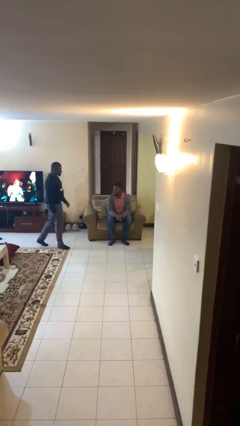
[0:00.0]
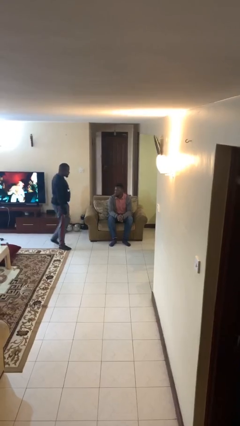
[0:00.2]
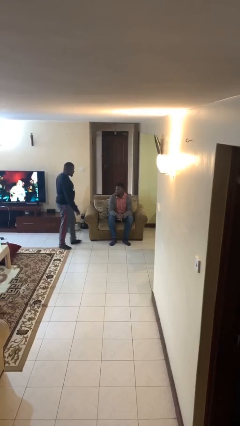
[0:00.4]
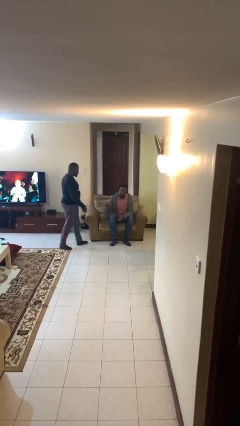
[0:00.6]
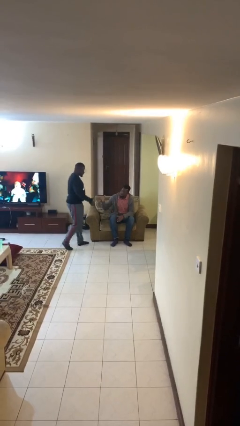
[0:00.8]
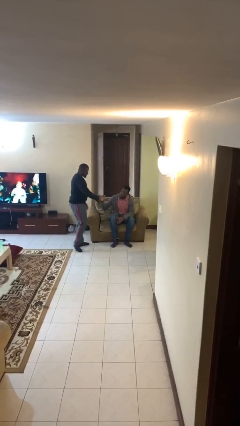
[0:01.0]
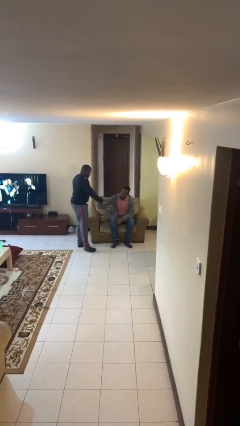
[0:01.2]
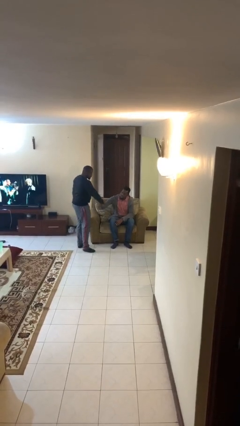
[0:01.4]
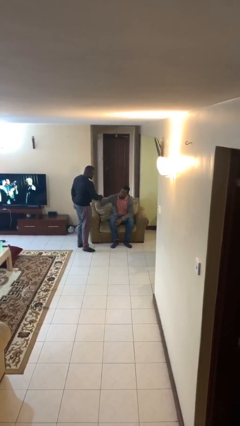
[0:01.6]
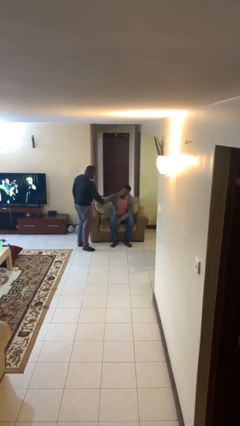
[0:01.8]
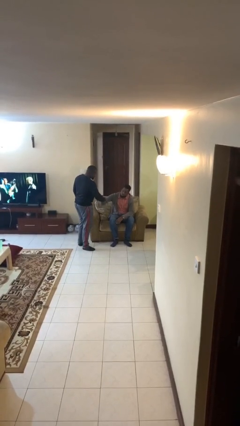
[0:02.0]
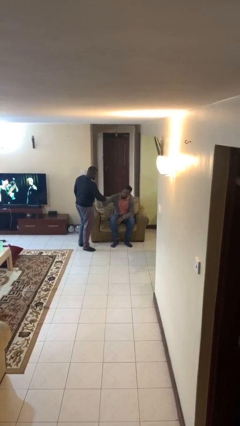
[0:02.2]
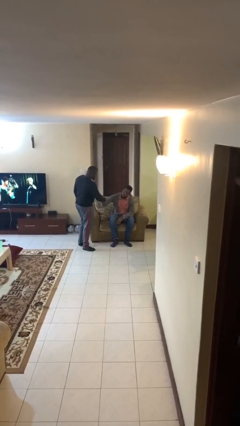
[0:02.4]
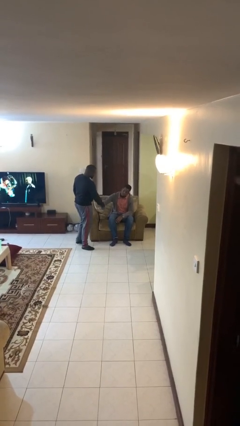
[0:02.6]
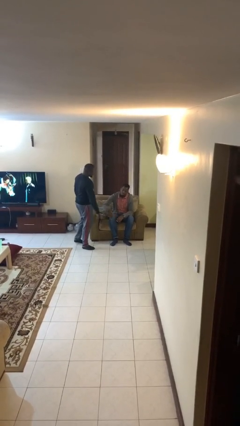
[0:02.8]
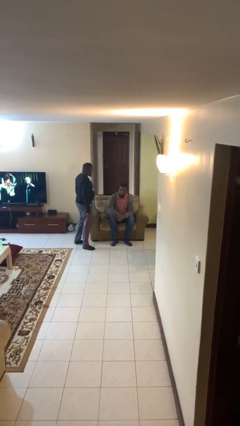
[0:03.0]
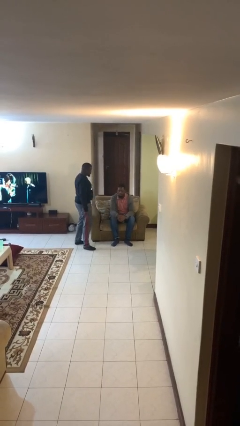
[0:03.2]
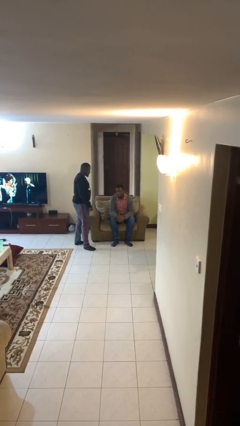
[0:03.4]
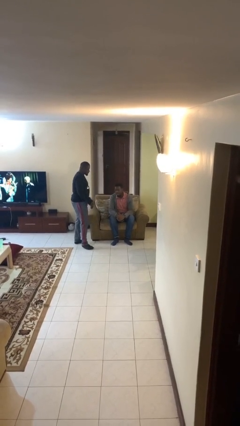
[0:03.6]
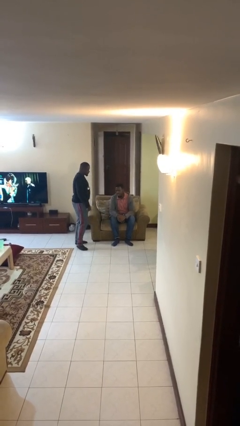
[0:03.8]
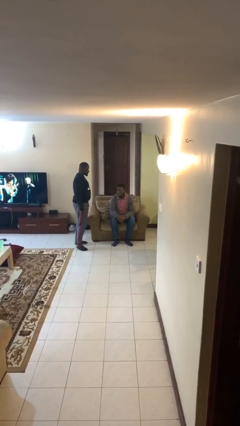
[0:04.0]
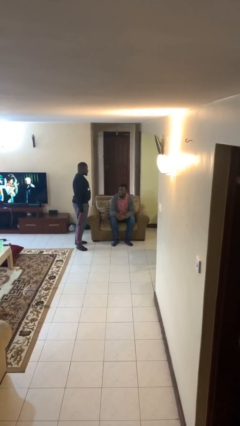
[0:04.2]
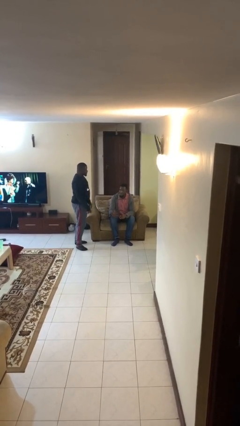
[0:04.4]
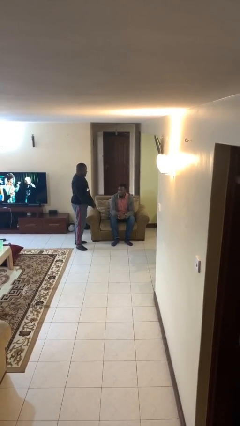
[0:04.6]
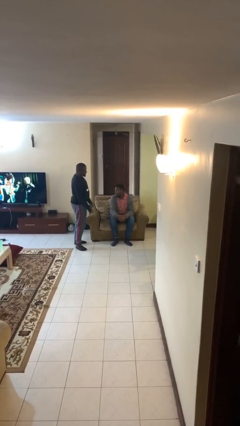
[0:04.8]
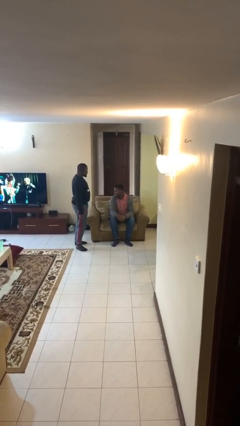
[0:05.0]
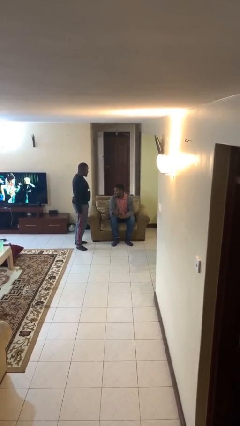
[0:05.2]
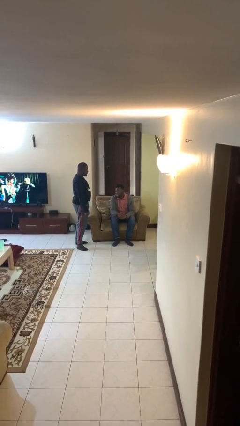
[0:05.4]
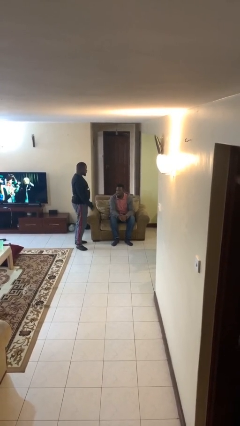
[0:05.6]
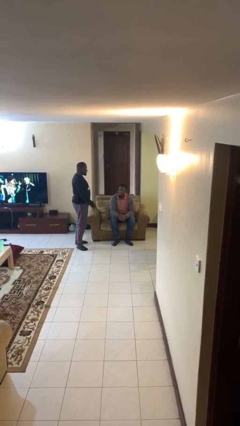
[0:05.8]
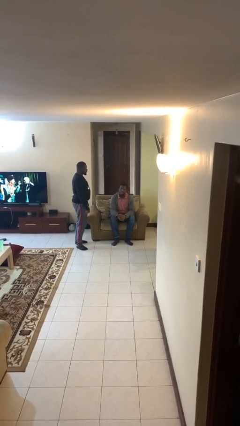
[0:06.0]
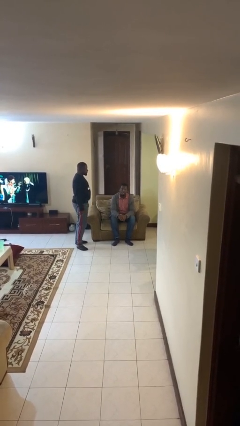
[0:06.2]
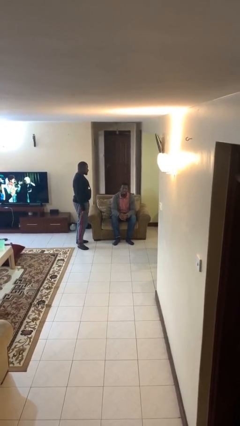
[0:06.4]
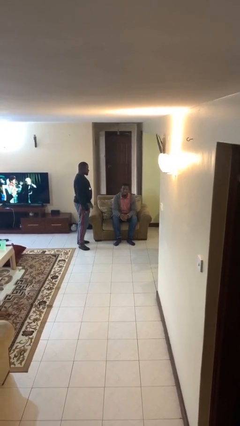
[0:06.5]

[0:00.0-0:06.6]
person shakes hand

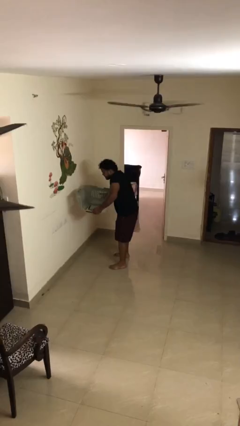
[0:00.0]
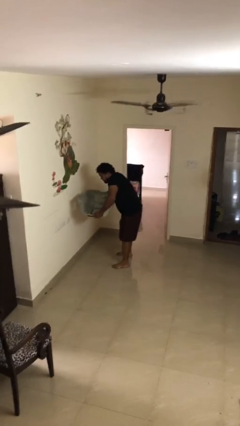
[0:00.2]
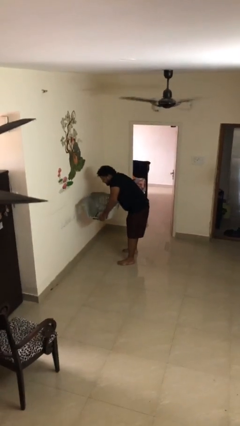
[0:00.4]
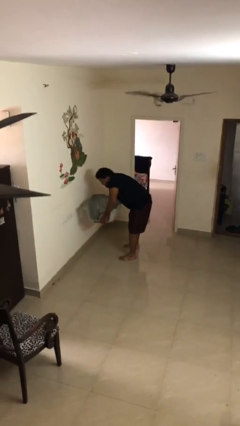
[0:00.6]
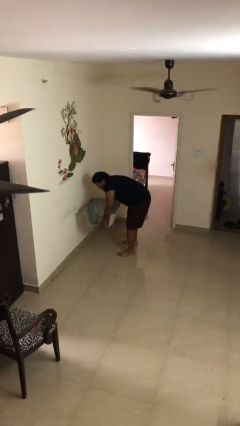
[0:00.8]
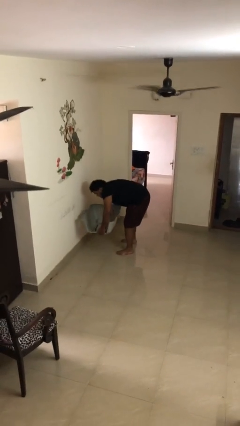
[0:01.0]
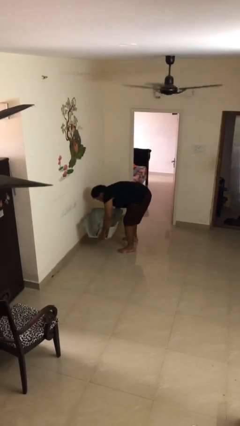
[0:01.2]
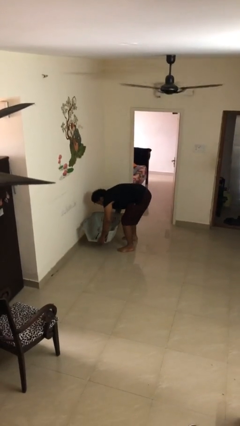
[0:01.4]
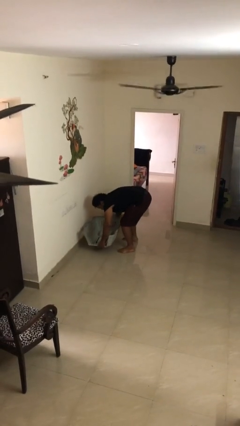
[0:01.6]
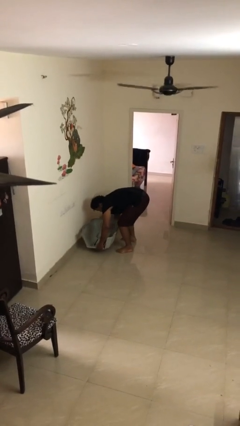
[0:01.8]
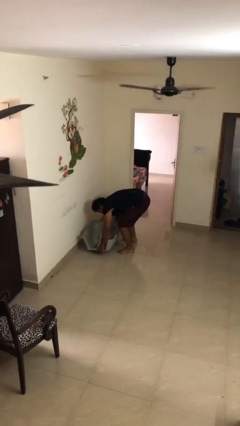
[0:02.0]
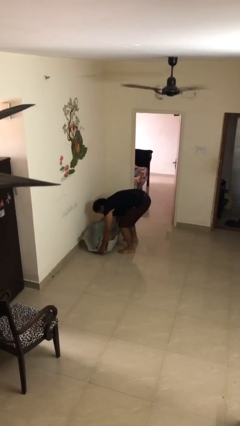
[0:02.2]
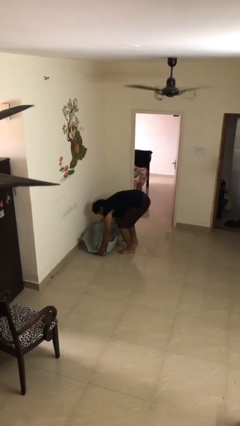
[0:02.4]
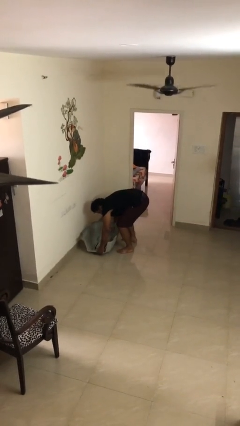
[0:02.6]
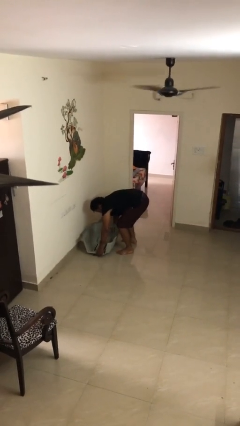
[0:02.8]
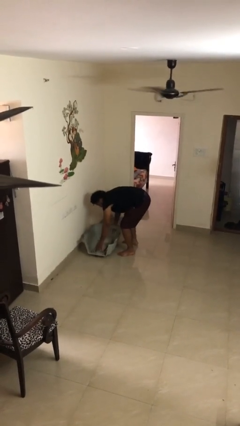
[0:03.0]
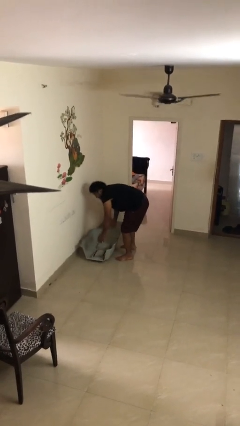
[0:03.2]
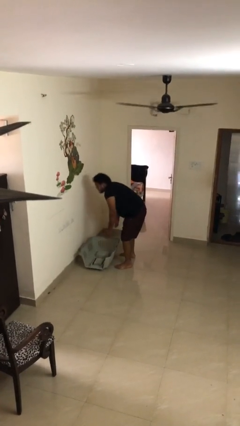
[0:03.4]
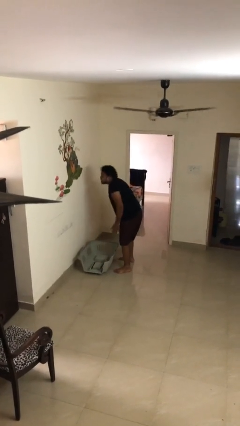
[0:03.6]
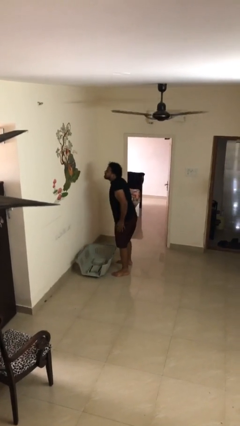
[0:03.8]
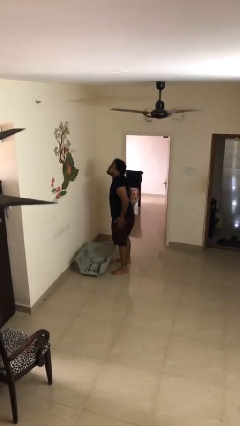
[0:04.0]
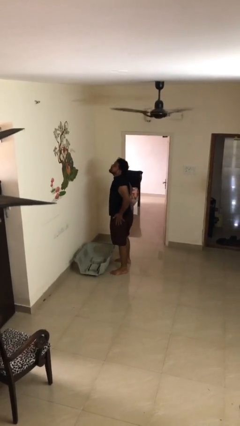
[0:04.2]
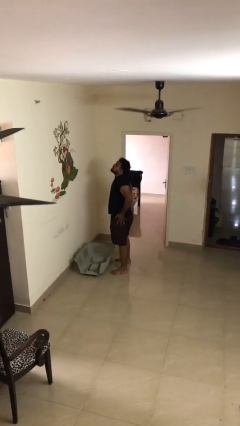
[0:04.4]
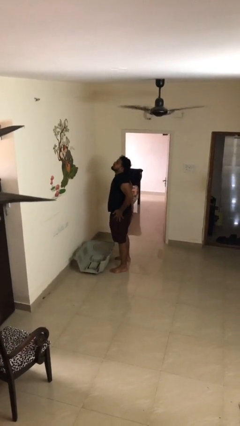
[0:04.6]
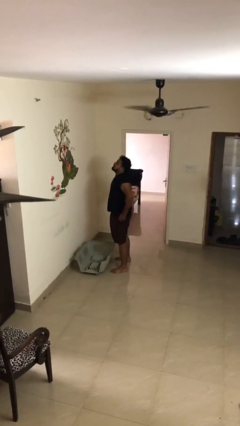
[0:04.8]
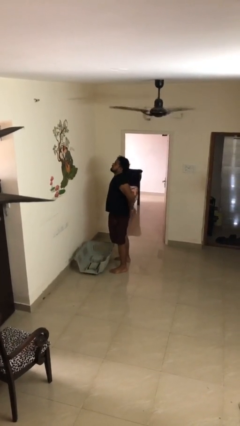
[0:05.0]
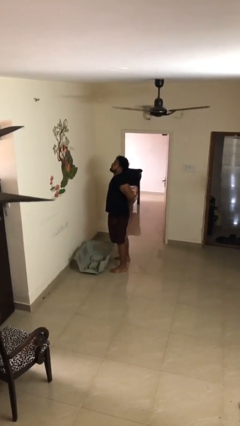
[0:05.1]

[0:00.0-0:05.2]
person puts down object on floor

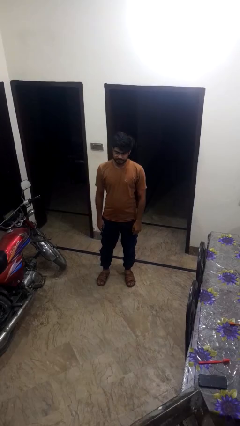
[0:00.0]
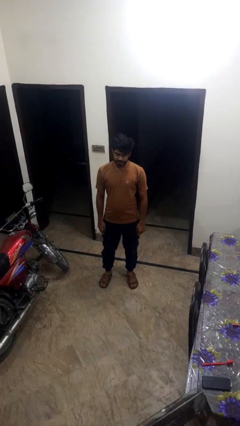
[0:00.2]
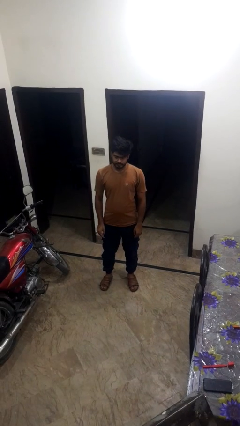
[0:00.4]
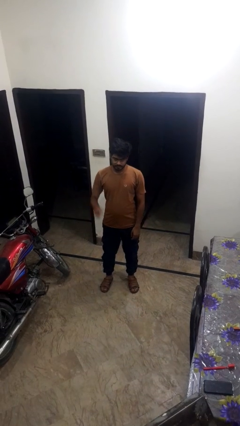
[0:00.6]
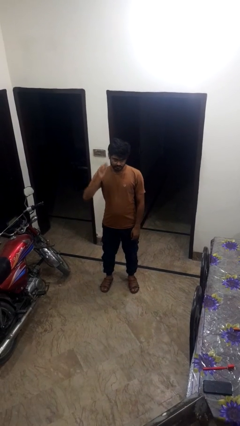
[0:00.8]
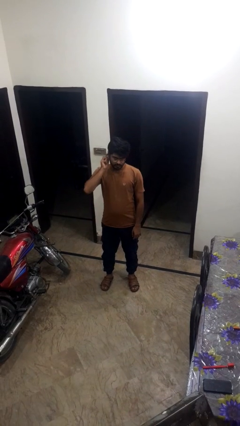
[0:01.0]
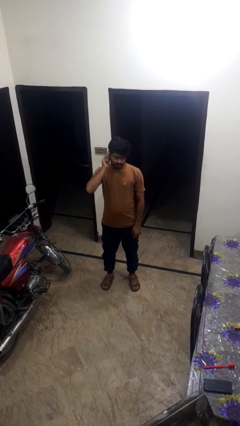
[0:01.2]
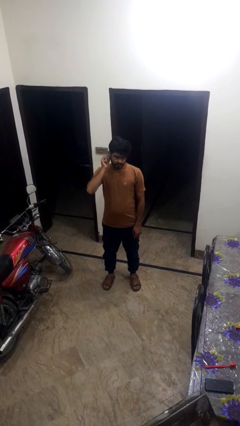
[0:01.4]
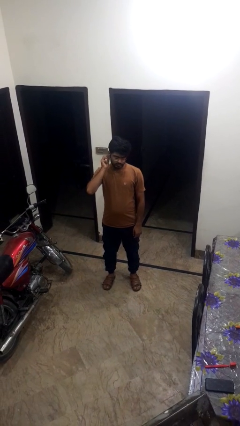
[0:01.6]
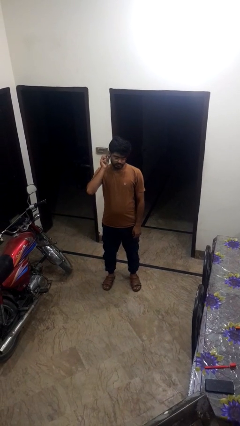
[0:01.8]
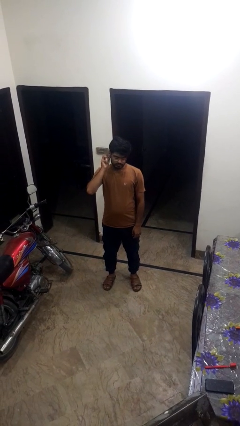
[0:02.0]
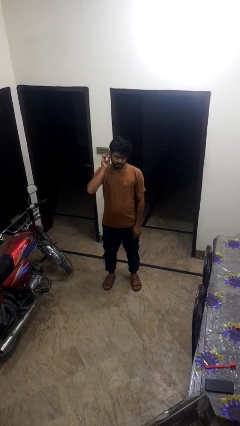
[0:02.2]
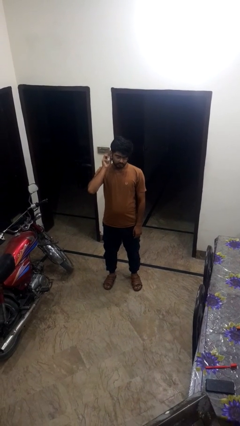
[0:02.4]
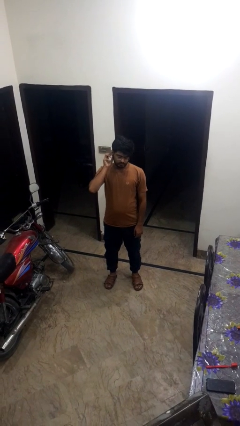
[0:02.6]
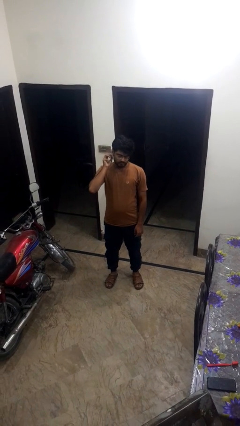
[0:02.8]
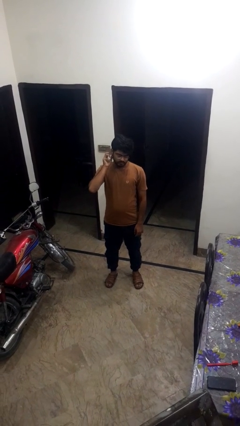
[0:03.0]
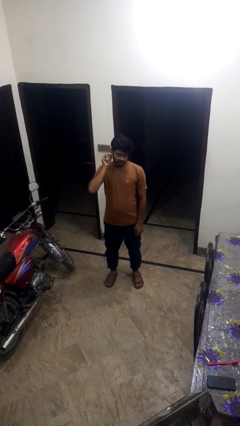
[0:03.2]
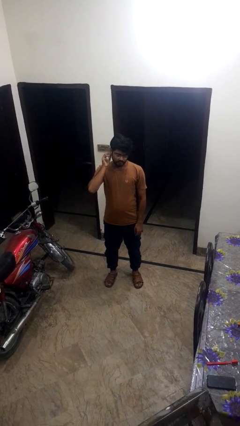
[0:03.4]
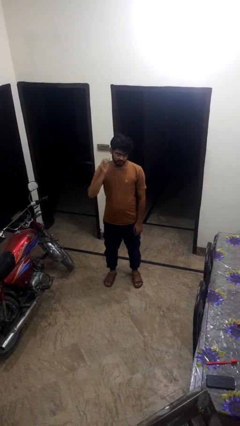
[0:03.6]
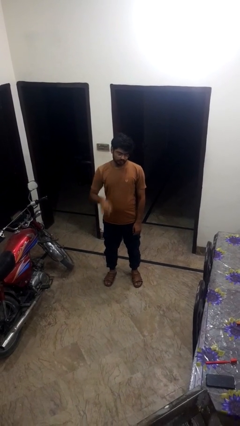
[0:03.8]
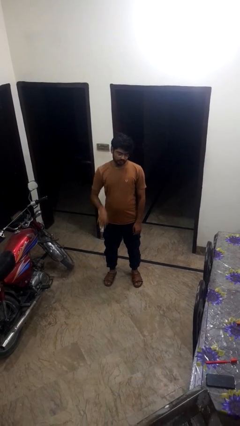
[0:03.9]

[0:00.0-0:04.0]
person touches earlobe

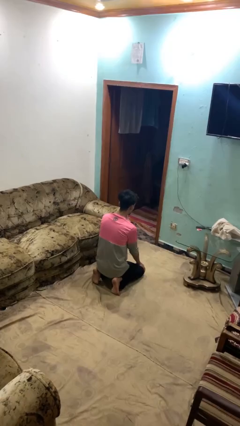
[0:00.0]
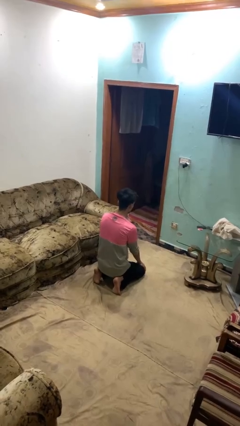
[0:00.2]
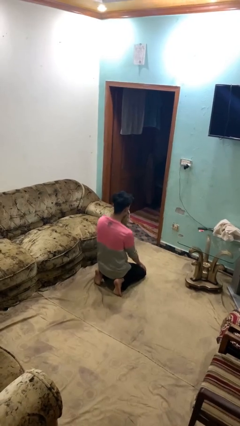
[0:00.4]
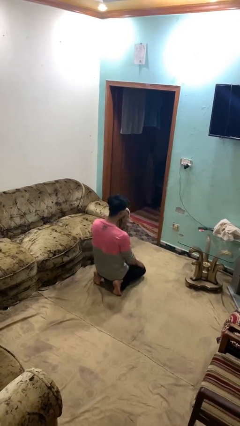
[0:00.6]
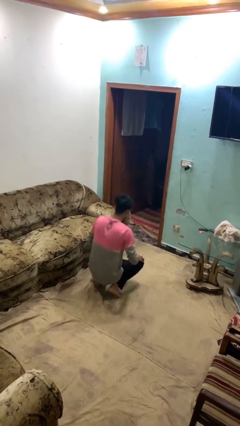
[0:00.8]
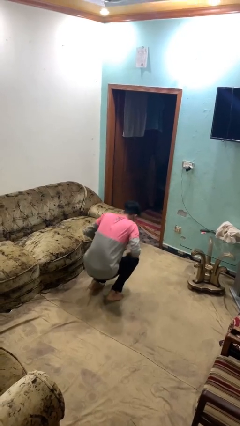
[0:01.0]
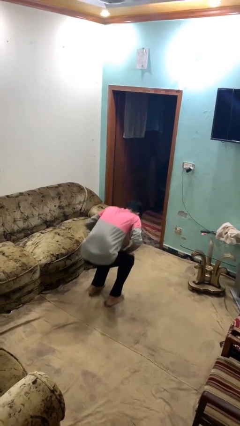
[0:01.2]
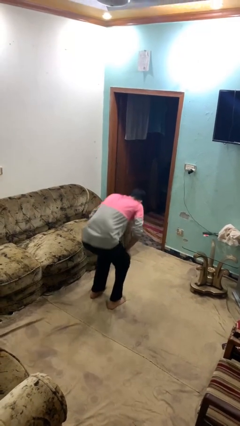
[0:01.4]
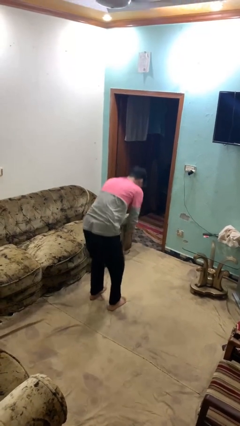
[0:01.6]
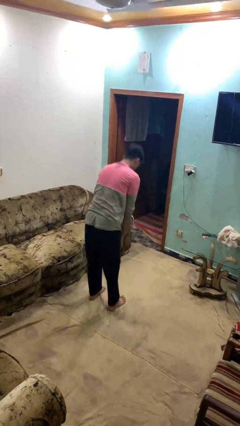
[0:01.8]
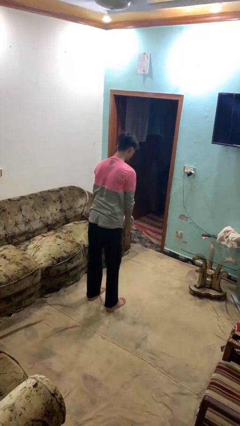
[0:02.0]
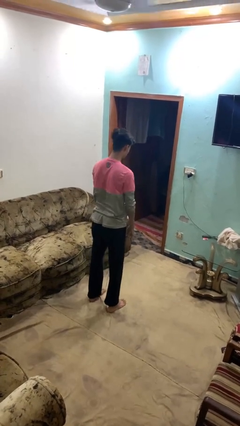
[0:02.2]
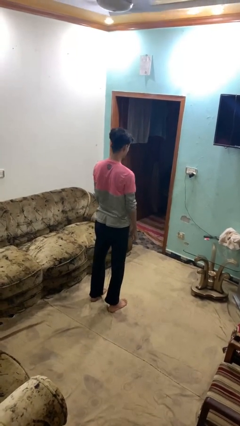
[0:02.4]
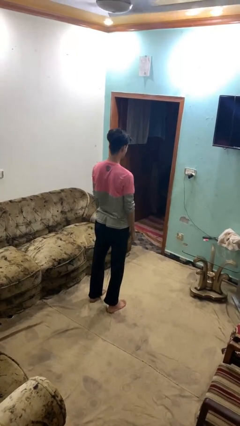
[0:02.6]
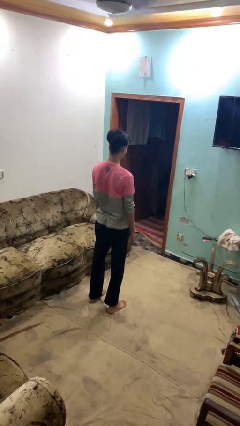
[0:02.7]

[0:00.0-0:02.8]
person stands up from floor
